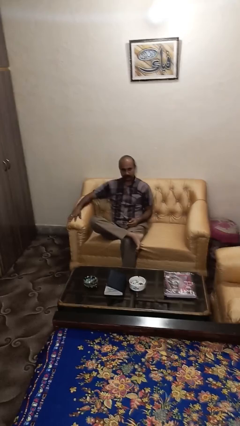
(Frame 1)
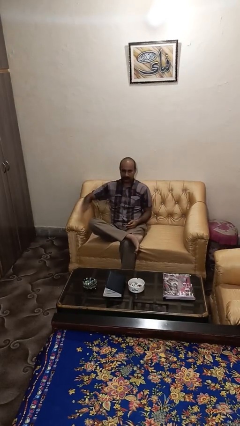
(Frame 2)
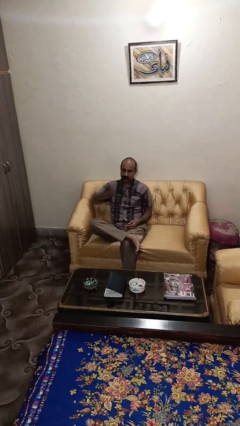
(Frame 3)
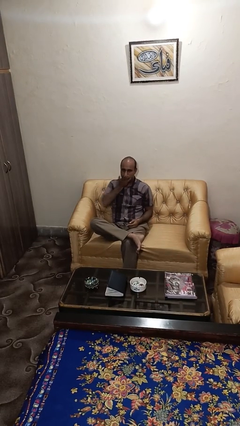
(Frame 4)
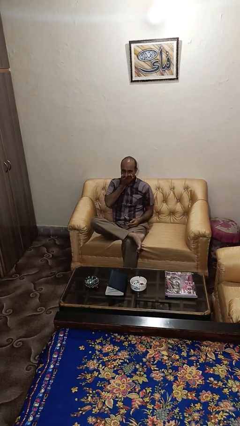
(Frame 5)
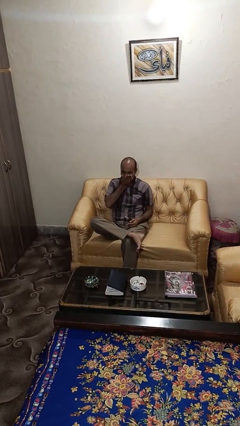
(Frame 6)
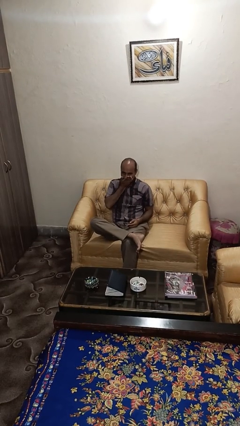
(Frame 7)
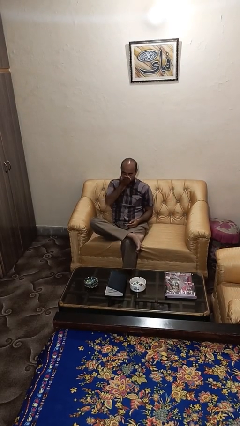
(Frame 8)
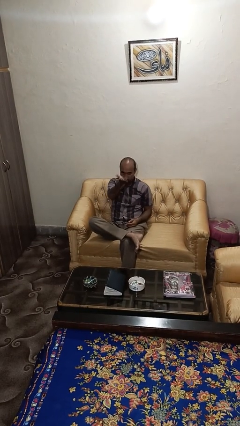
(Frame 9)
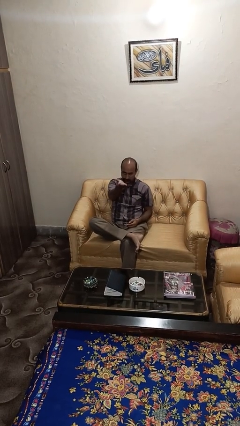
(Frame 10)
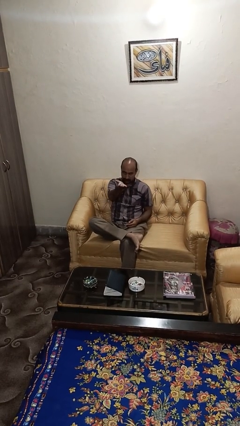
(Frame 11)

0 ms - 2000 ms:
person gestures blow kiss

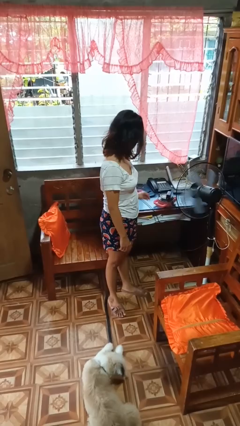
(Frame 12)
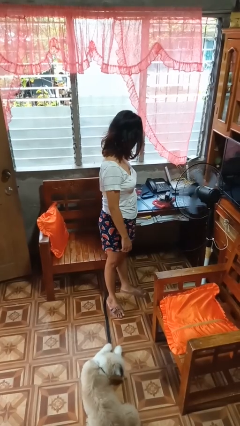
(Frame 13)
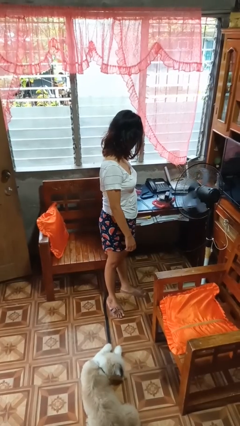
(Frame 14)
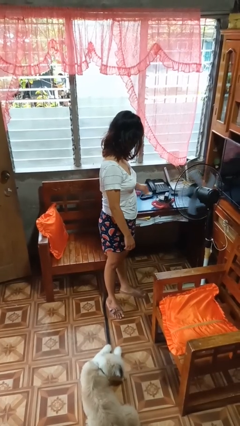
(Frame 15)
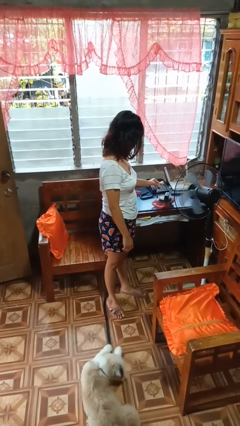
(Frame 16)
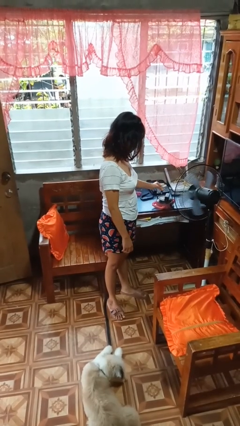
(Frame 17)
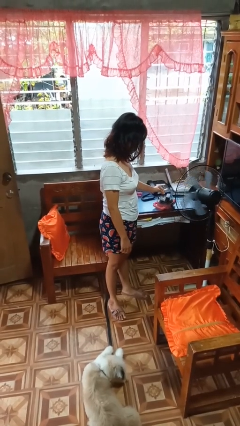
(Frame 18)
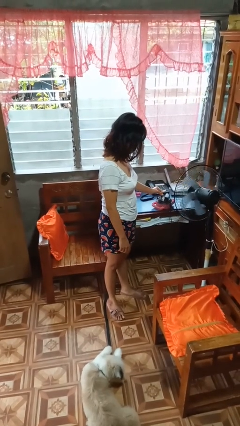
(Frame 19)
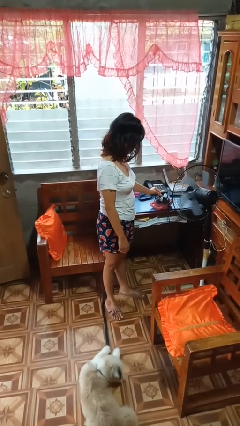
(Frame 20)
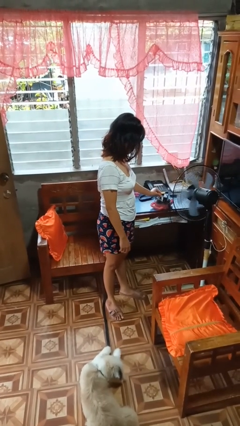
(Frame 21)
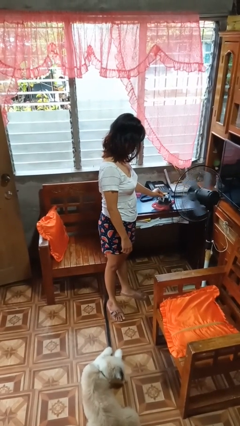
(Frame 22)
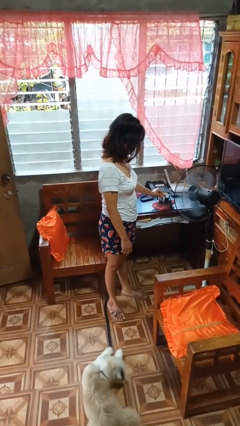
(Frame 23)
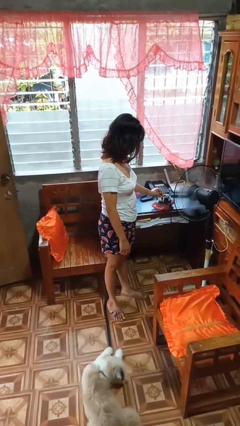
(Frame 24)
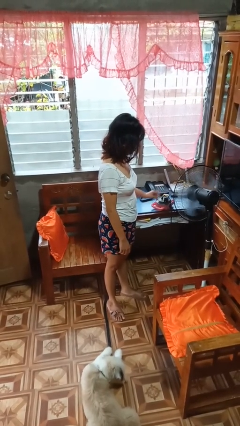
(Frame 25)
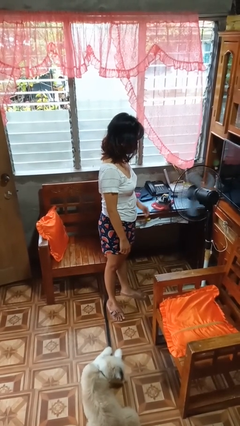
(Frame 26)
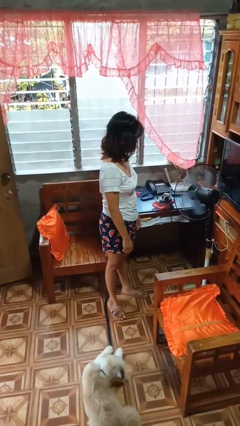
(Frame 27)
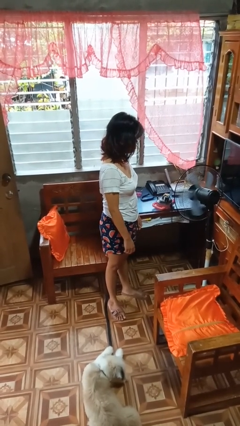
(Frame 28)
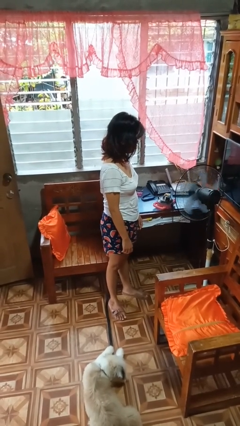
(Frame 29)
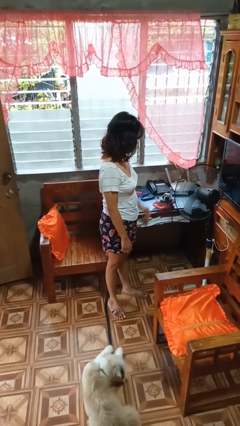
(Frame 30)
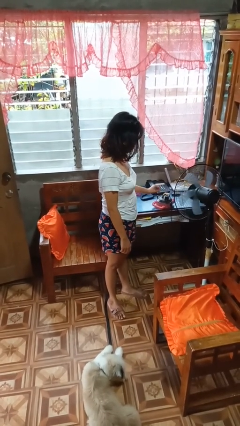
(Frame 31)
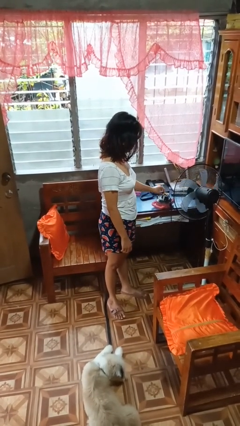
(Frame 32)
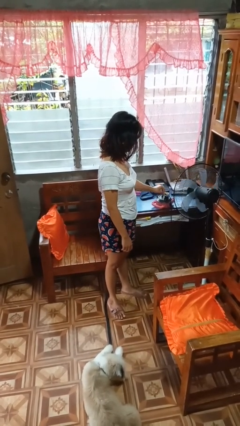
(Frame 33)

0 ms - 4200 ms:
person plugs into electrical socket

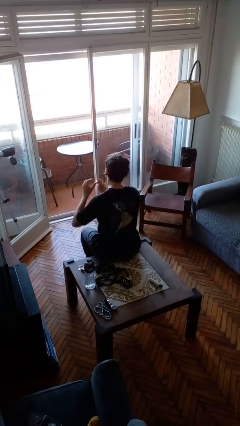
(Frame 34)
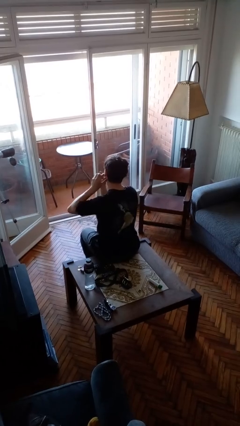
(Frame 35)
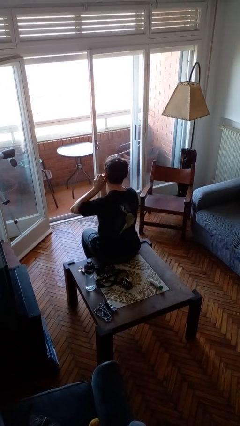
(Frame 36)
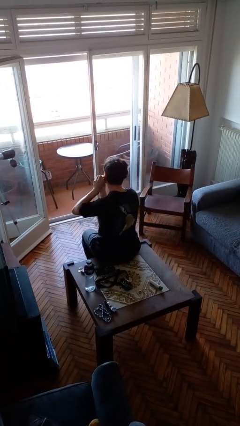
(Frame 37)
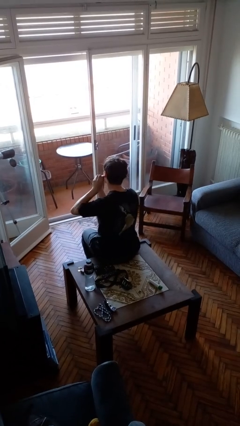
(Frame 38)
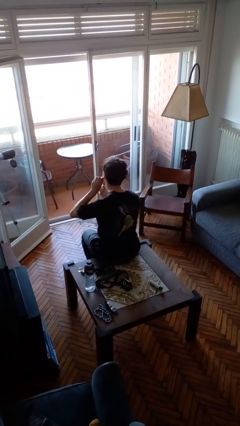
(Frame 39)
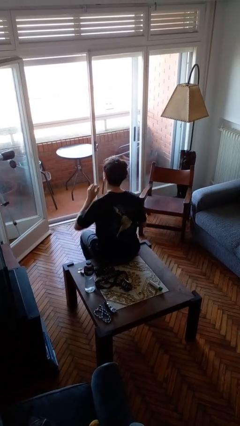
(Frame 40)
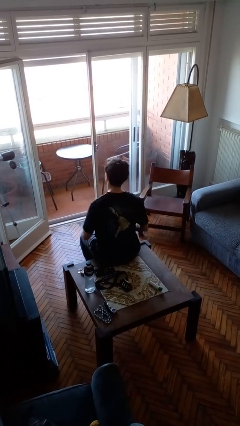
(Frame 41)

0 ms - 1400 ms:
person takes off earrings

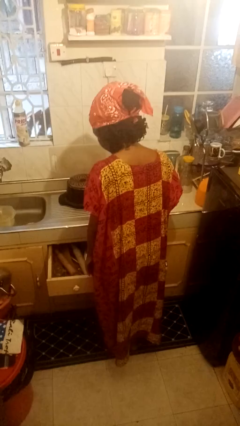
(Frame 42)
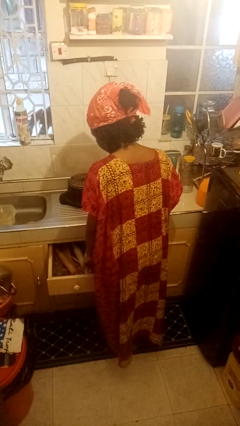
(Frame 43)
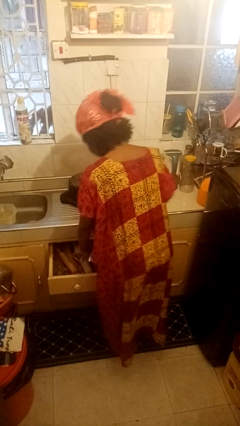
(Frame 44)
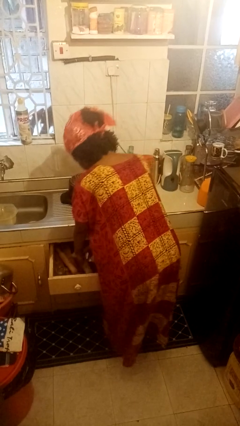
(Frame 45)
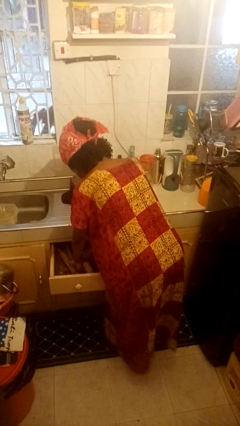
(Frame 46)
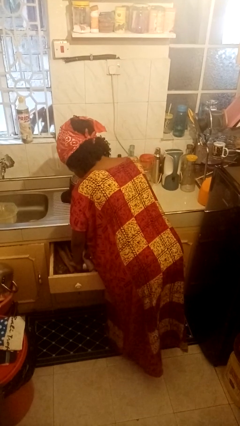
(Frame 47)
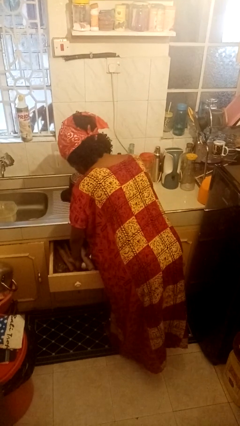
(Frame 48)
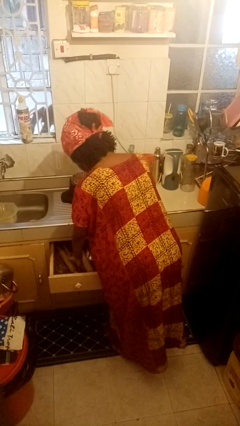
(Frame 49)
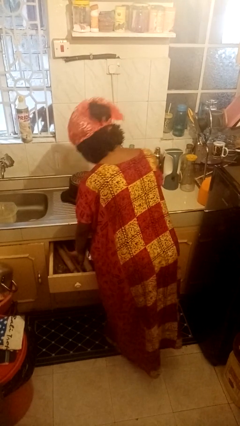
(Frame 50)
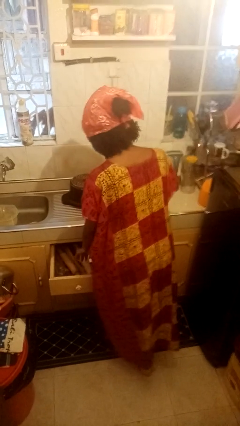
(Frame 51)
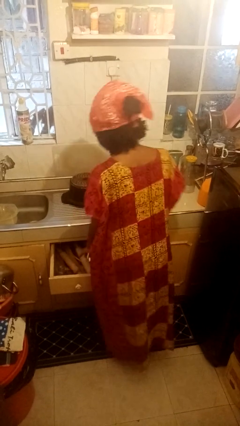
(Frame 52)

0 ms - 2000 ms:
person searches in kitchen drawer

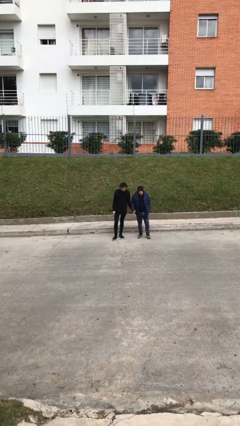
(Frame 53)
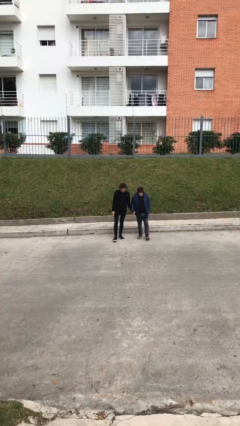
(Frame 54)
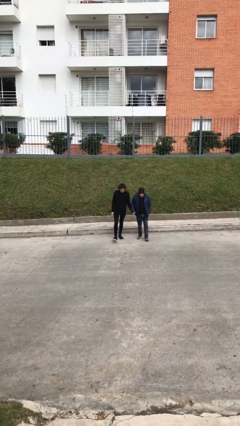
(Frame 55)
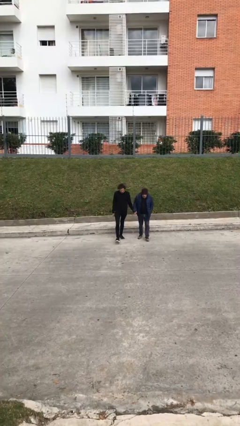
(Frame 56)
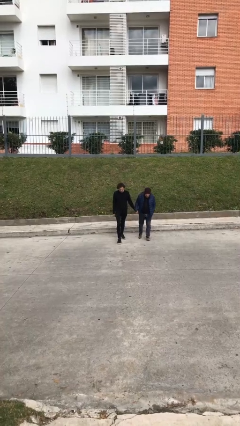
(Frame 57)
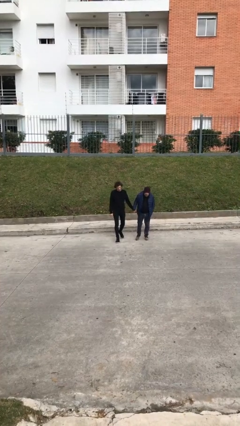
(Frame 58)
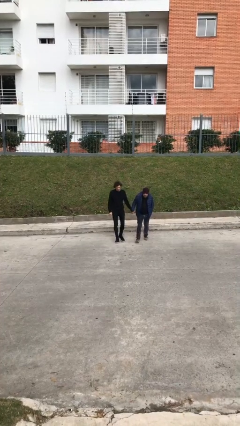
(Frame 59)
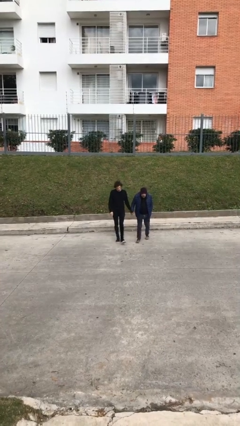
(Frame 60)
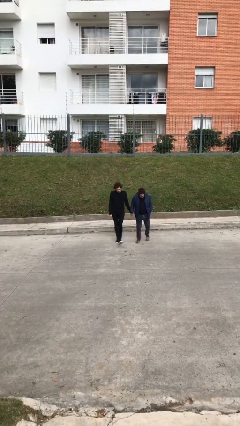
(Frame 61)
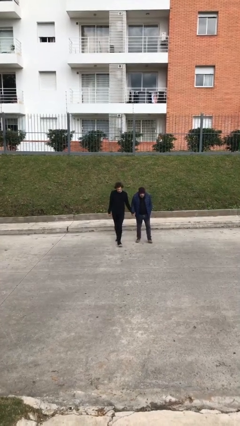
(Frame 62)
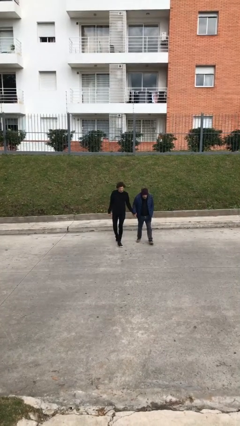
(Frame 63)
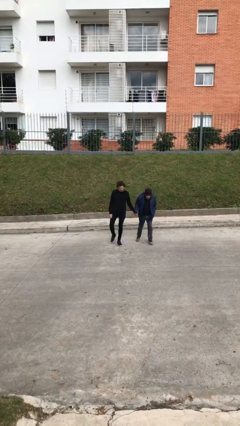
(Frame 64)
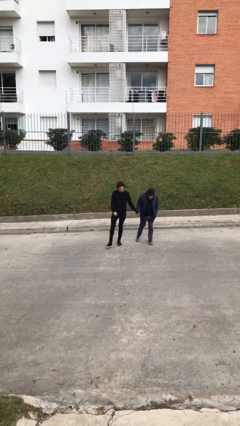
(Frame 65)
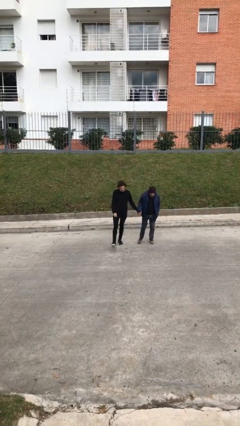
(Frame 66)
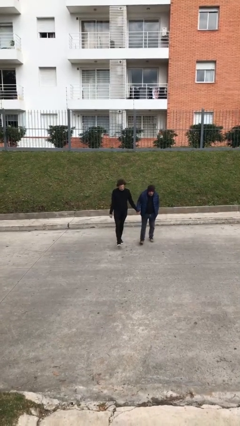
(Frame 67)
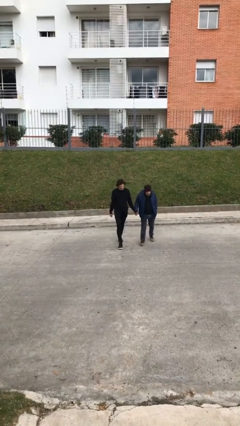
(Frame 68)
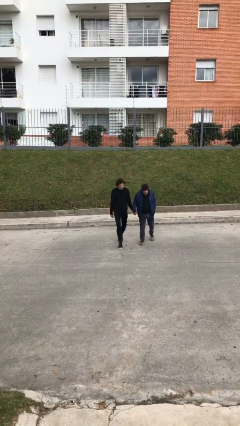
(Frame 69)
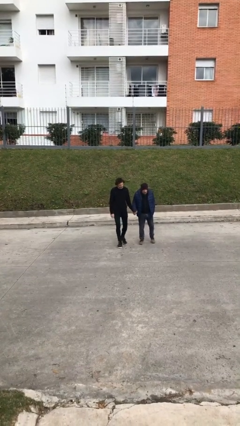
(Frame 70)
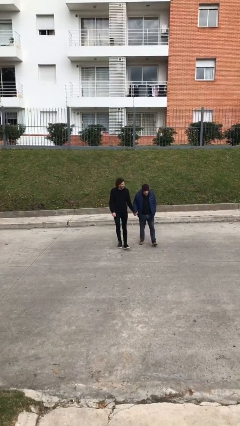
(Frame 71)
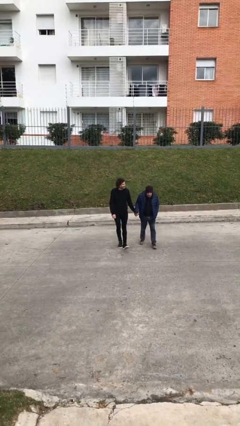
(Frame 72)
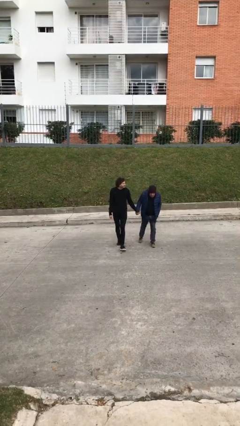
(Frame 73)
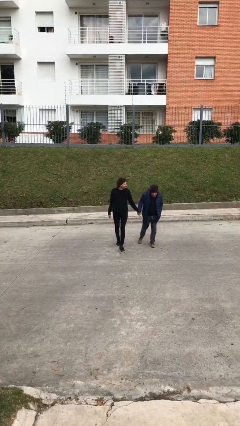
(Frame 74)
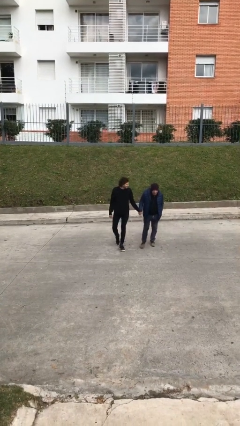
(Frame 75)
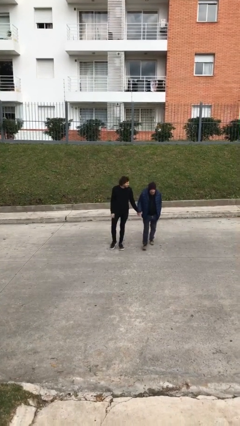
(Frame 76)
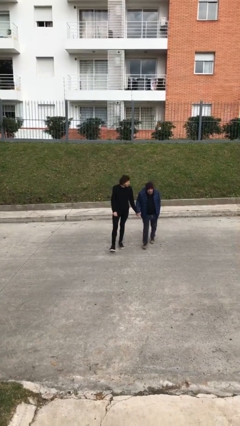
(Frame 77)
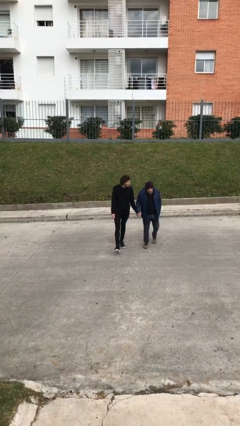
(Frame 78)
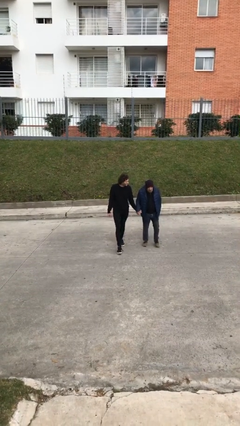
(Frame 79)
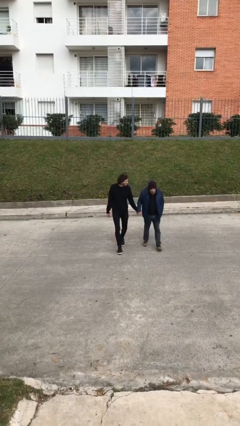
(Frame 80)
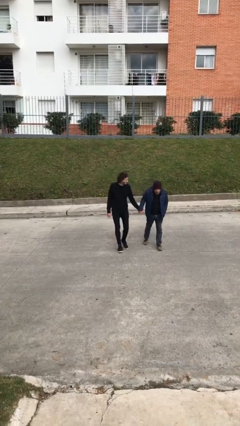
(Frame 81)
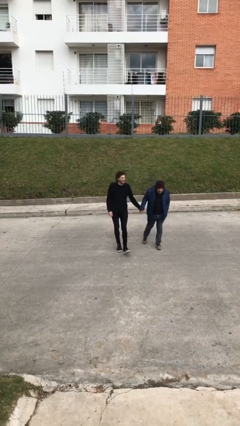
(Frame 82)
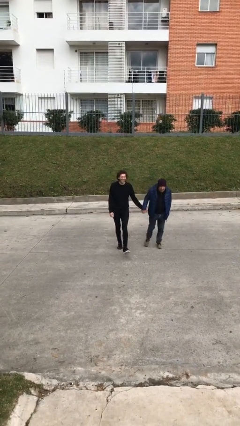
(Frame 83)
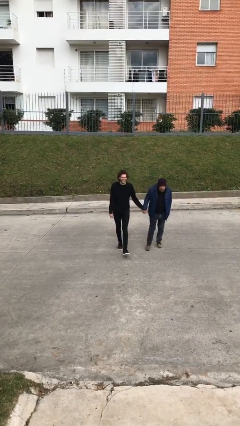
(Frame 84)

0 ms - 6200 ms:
person holds hand

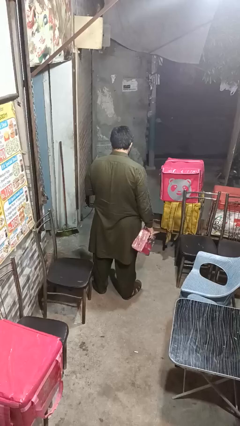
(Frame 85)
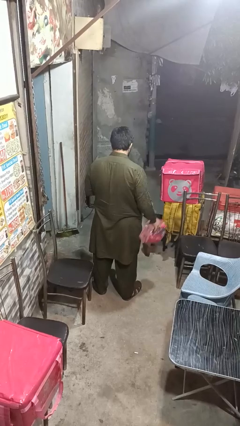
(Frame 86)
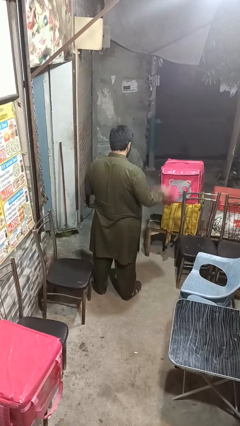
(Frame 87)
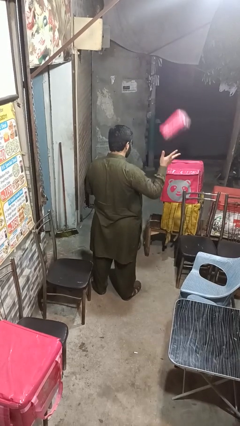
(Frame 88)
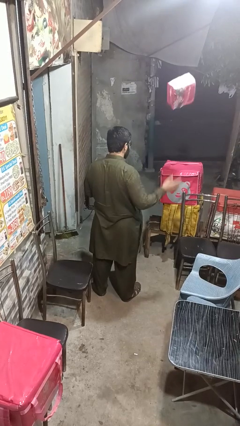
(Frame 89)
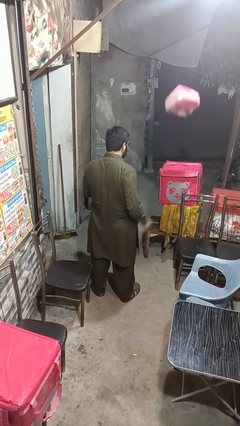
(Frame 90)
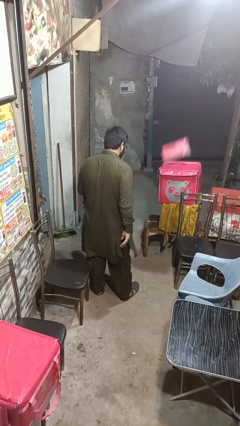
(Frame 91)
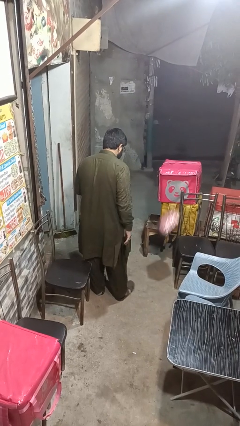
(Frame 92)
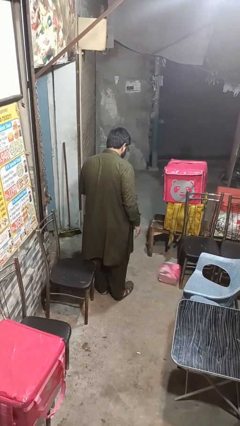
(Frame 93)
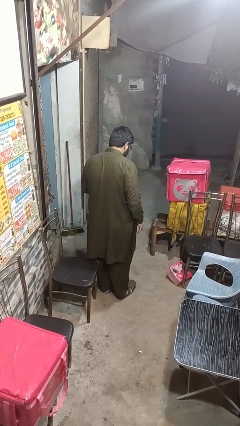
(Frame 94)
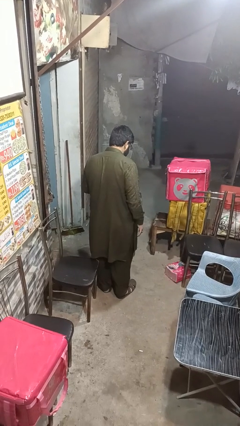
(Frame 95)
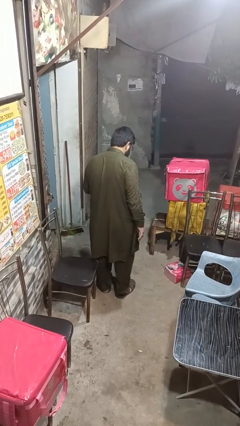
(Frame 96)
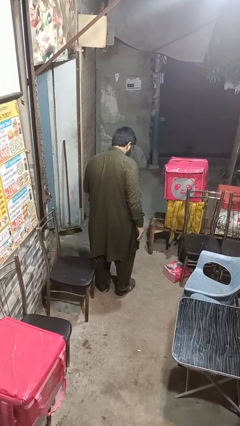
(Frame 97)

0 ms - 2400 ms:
person throws object into air
